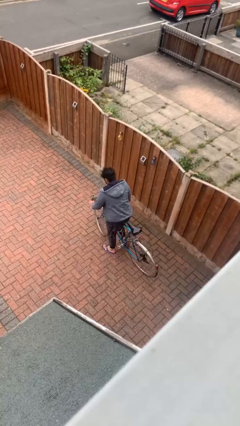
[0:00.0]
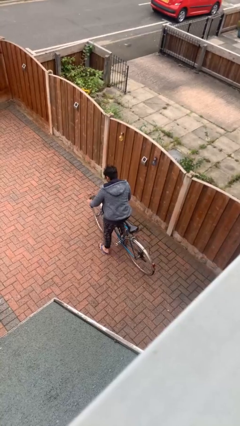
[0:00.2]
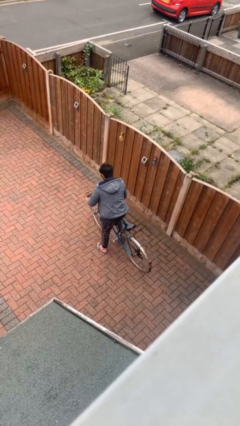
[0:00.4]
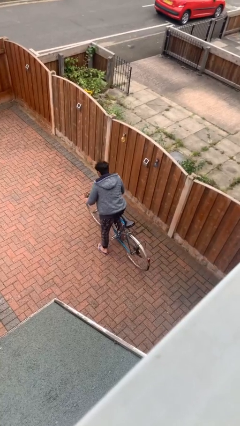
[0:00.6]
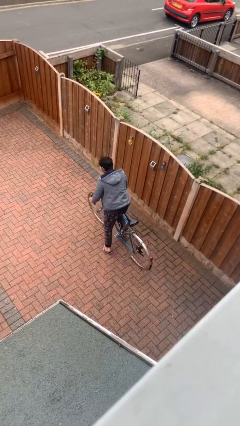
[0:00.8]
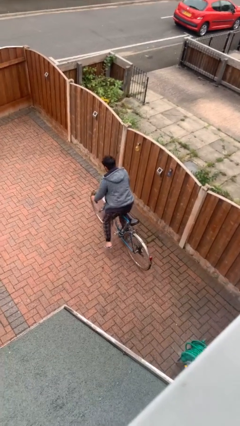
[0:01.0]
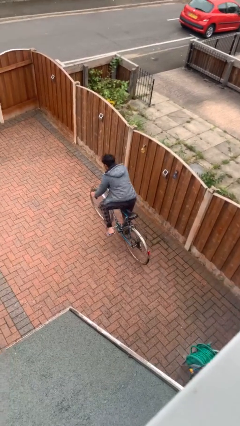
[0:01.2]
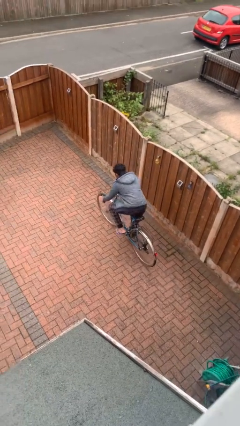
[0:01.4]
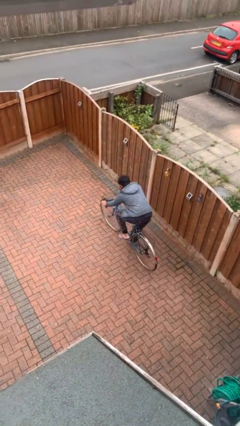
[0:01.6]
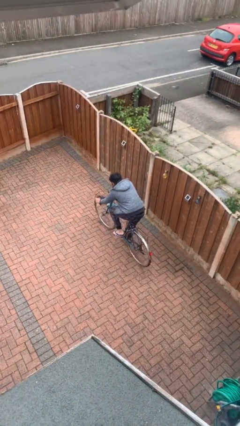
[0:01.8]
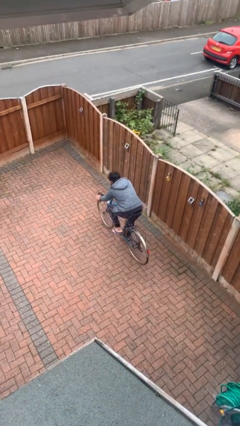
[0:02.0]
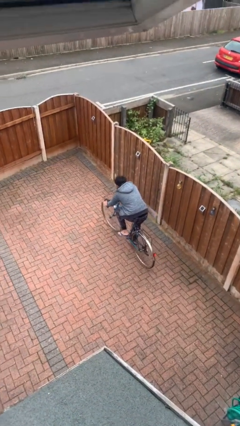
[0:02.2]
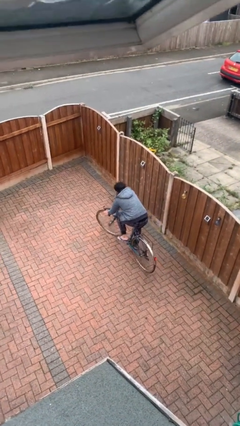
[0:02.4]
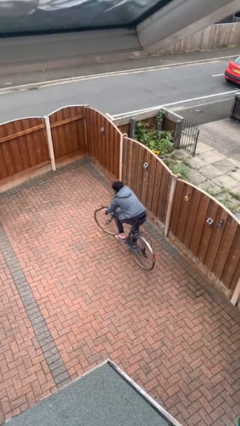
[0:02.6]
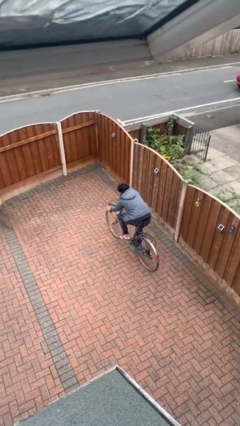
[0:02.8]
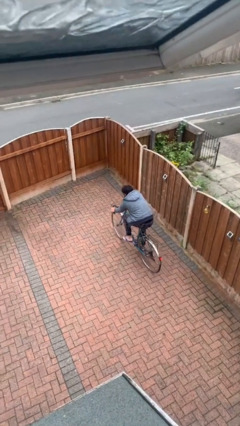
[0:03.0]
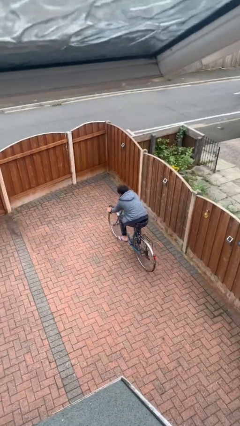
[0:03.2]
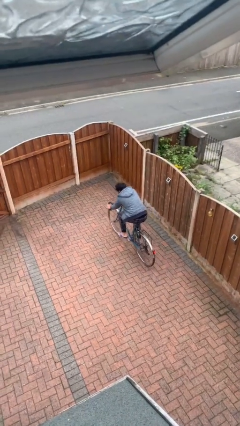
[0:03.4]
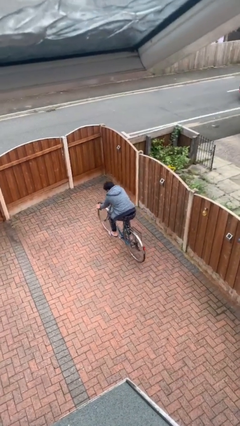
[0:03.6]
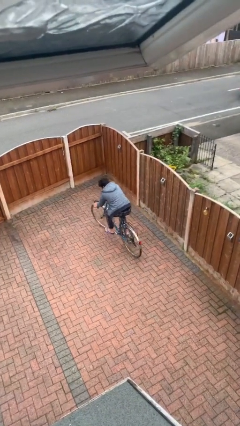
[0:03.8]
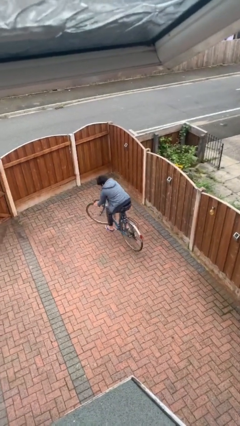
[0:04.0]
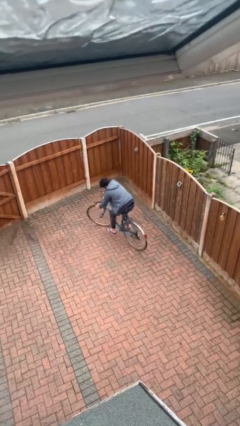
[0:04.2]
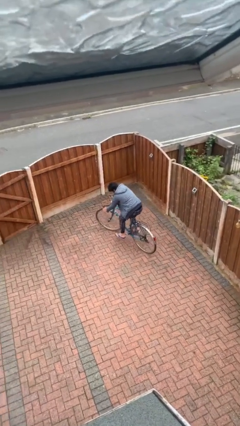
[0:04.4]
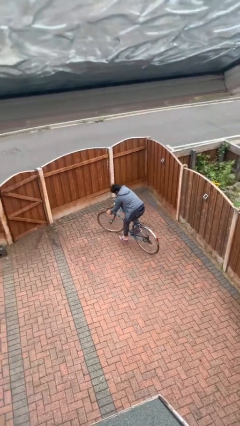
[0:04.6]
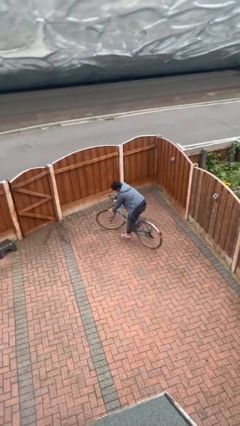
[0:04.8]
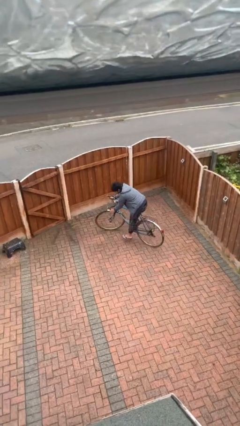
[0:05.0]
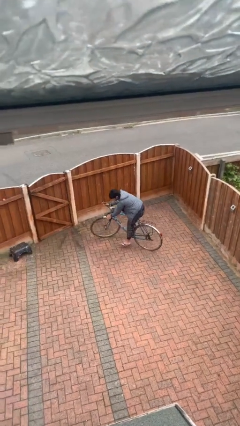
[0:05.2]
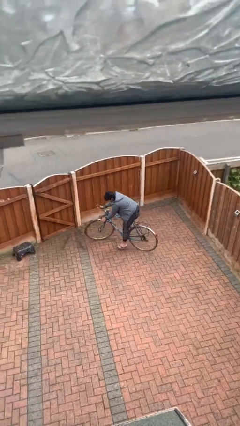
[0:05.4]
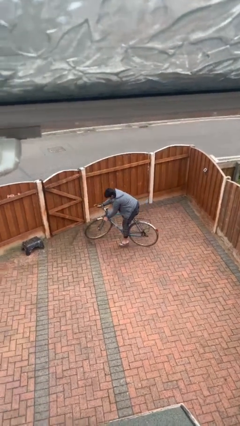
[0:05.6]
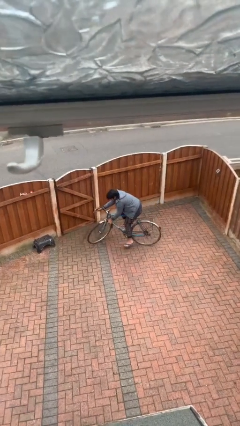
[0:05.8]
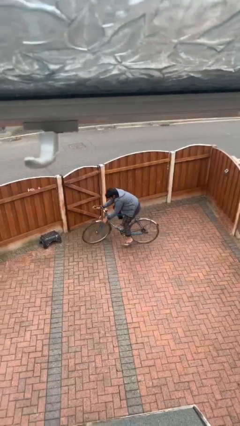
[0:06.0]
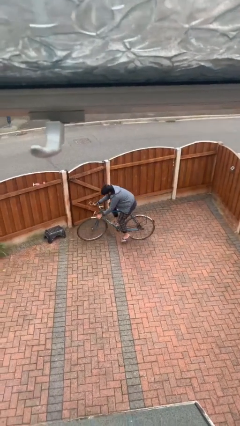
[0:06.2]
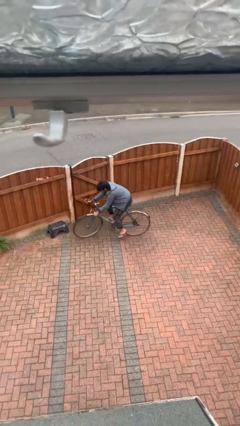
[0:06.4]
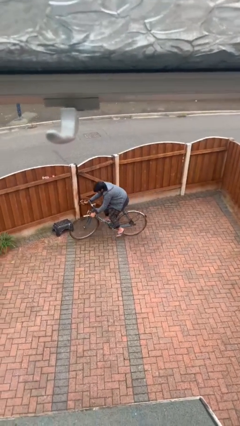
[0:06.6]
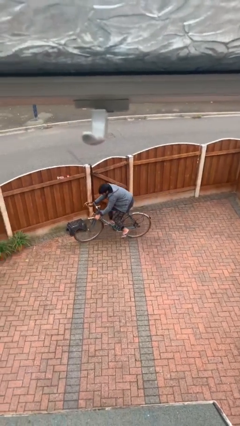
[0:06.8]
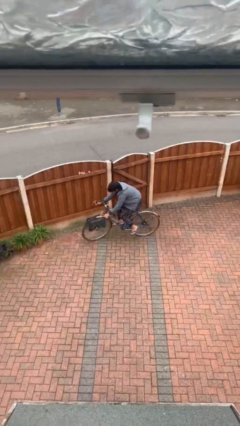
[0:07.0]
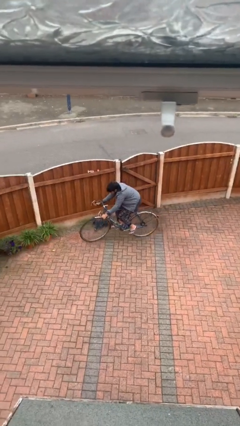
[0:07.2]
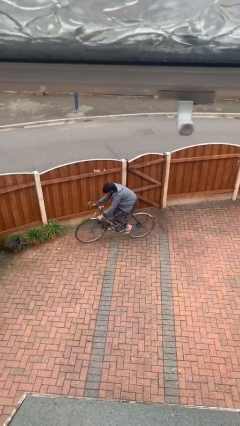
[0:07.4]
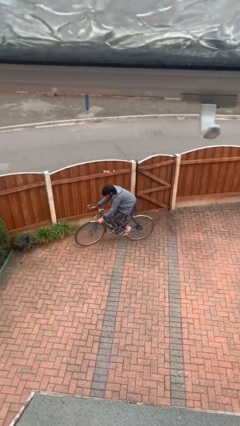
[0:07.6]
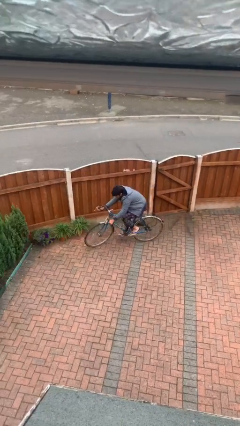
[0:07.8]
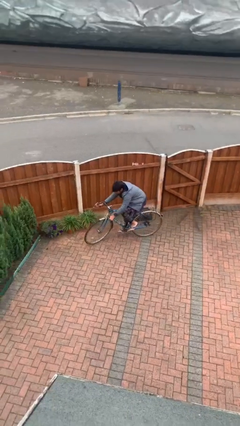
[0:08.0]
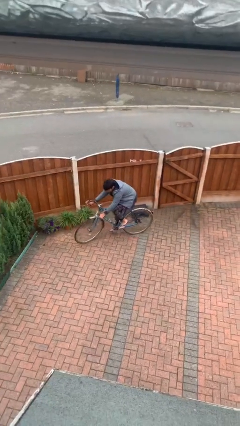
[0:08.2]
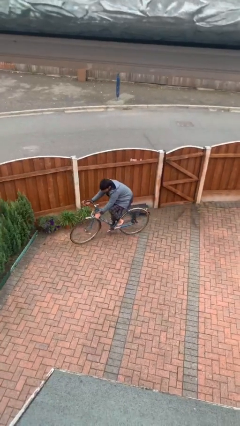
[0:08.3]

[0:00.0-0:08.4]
person rides bicycle

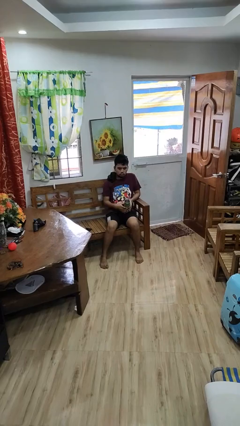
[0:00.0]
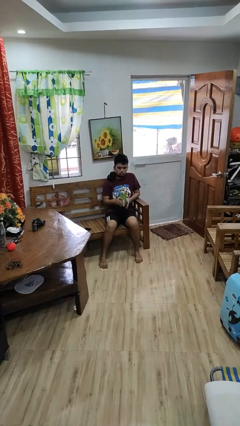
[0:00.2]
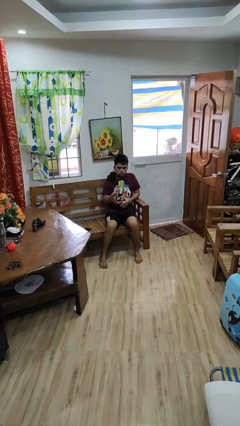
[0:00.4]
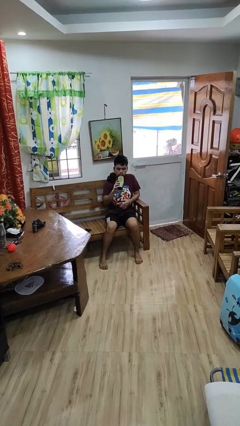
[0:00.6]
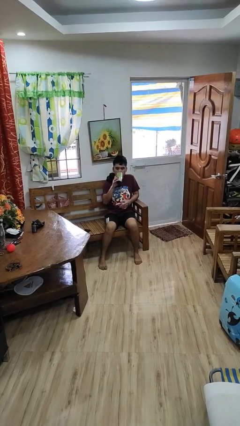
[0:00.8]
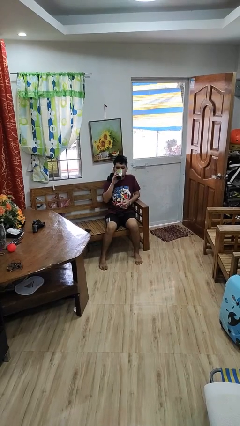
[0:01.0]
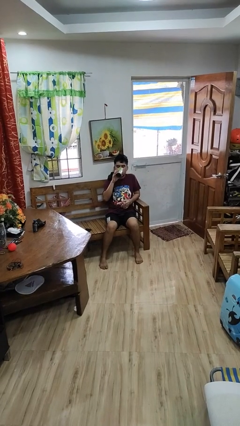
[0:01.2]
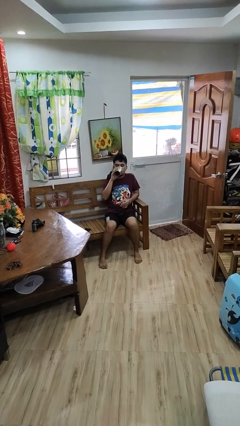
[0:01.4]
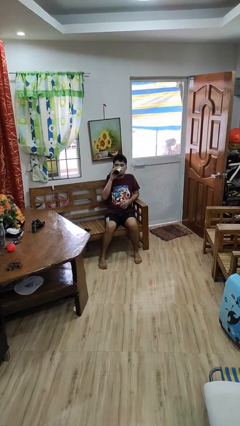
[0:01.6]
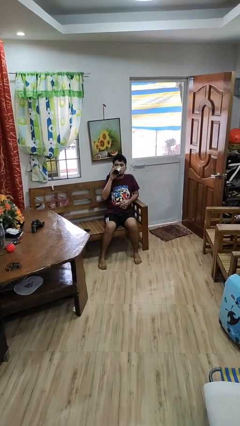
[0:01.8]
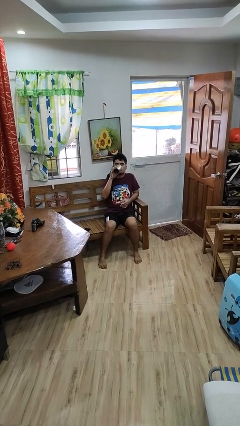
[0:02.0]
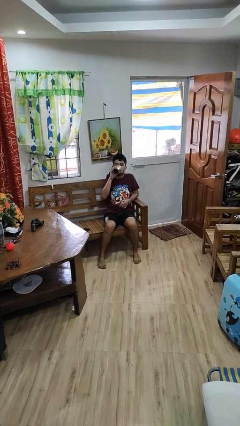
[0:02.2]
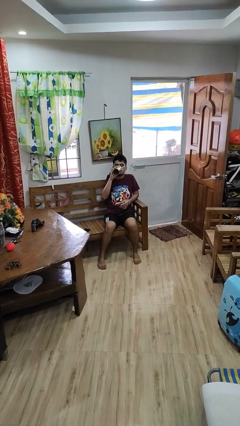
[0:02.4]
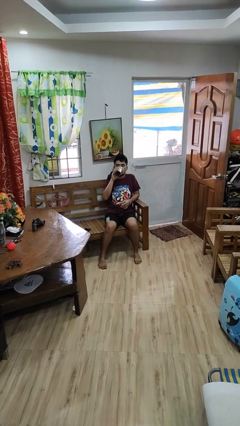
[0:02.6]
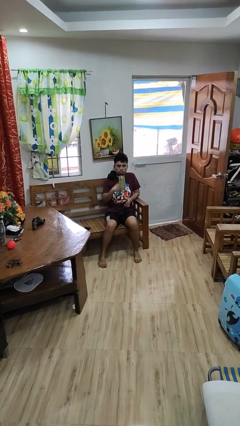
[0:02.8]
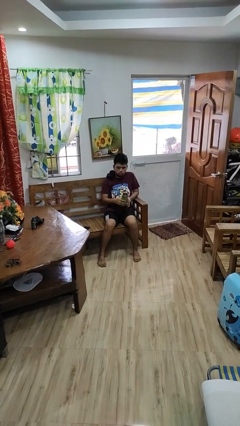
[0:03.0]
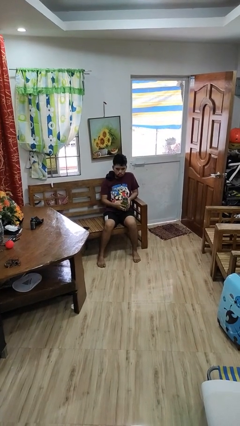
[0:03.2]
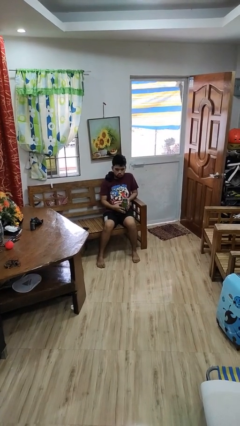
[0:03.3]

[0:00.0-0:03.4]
person drinks from bottle

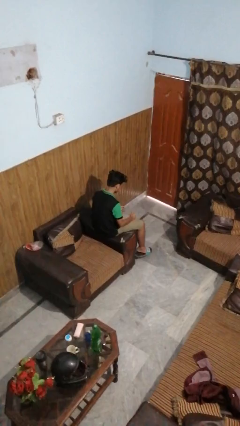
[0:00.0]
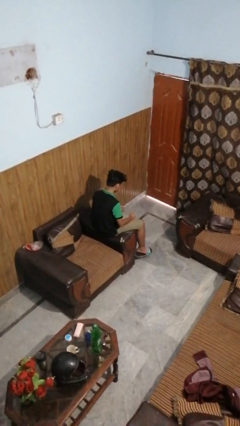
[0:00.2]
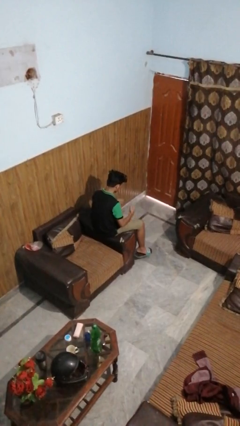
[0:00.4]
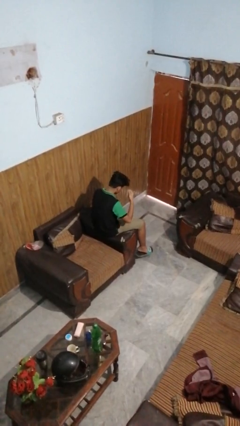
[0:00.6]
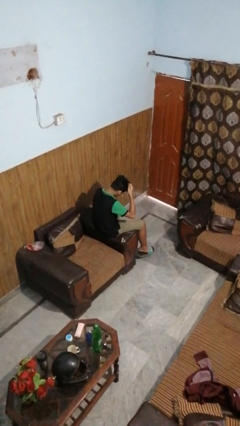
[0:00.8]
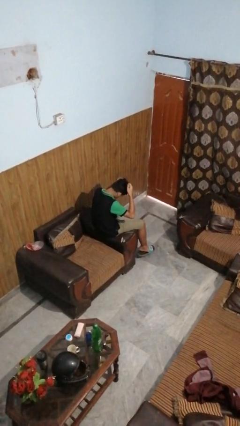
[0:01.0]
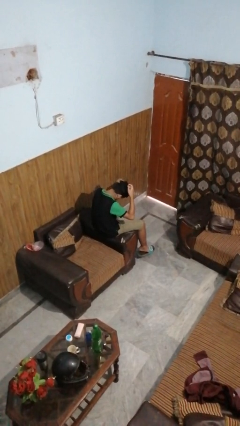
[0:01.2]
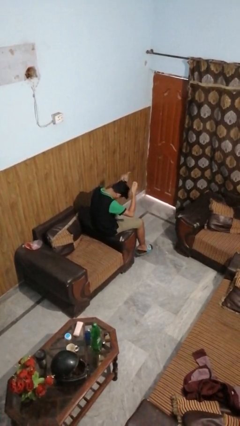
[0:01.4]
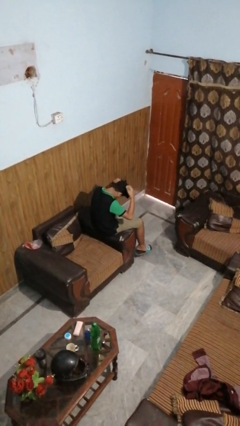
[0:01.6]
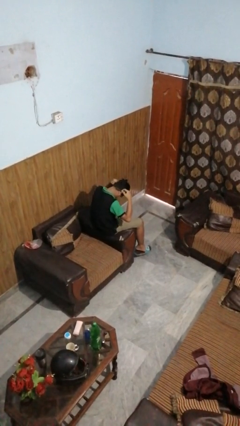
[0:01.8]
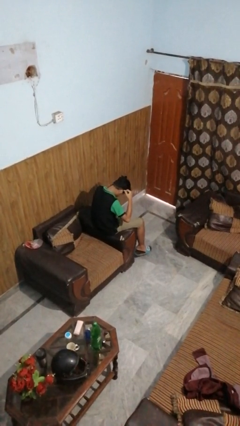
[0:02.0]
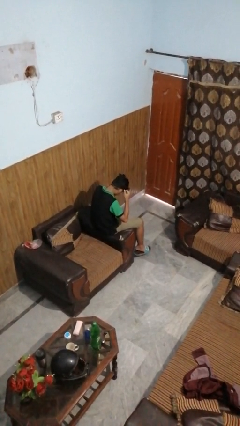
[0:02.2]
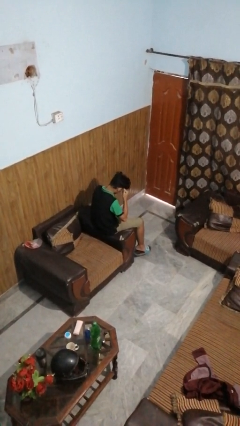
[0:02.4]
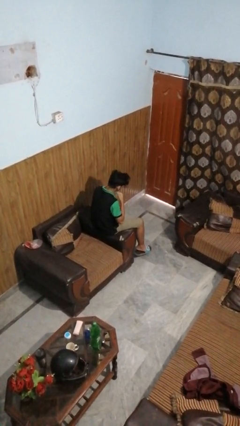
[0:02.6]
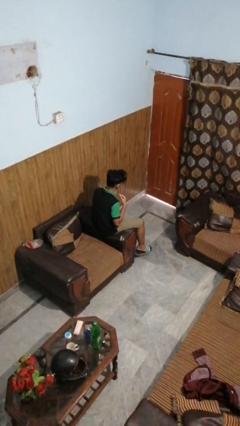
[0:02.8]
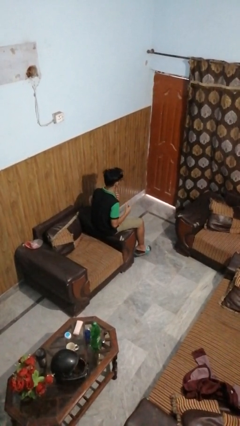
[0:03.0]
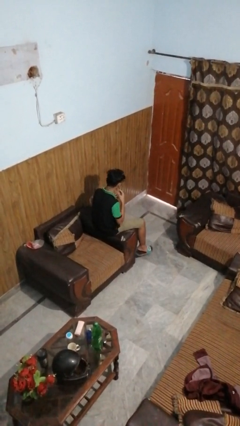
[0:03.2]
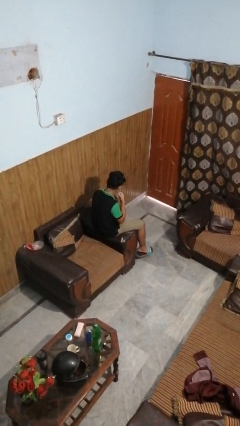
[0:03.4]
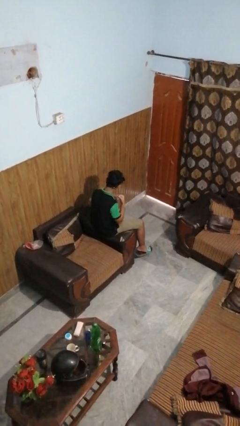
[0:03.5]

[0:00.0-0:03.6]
person puts on necklace

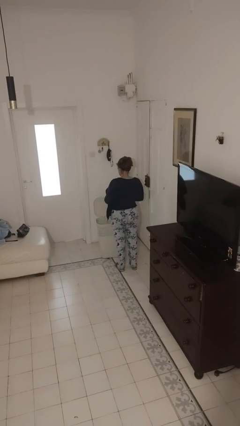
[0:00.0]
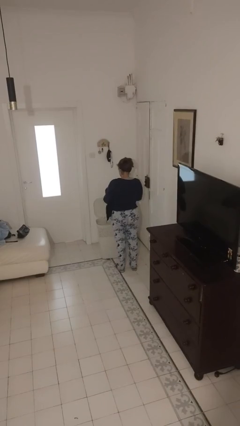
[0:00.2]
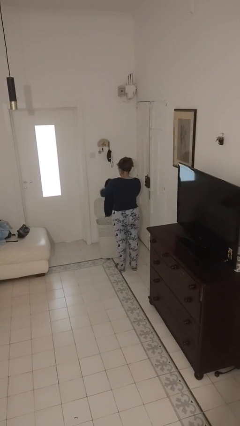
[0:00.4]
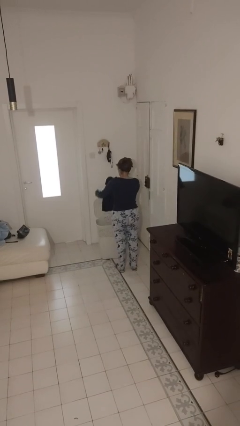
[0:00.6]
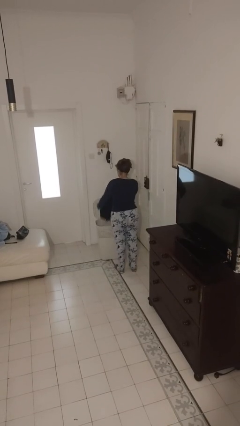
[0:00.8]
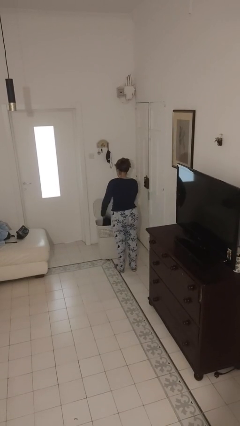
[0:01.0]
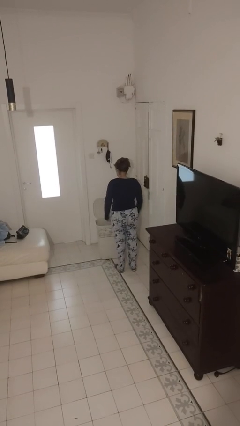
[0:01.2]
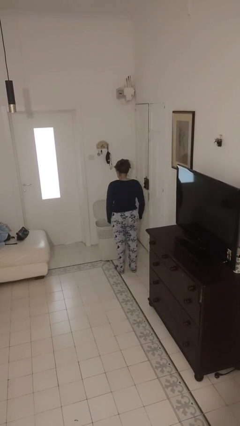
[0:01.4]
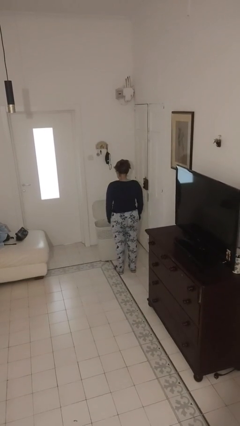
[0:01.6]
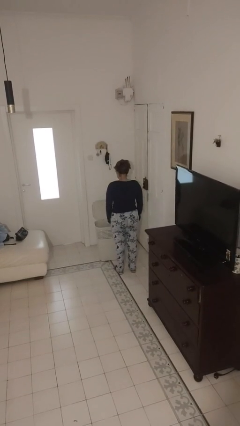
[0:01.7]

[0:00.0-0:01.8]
person puts object into basket

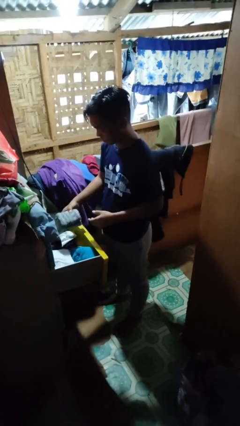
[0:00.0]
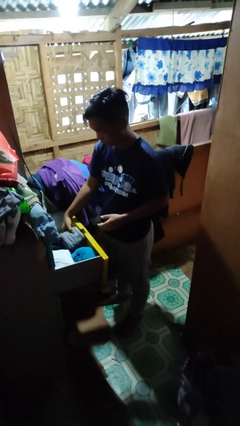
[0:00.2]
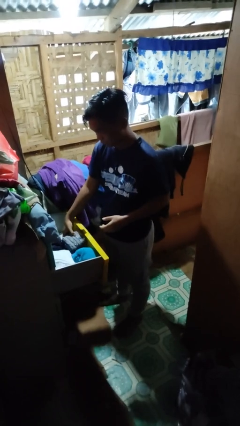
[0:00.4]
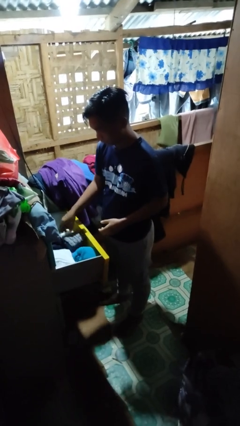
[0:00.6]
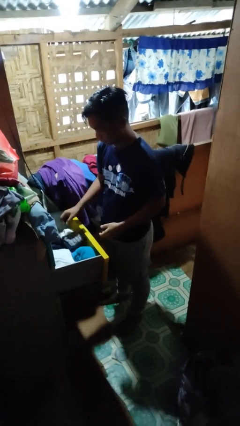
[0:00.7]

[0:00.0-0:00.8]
person puts clothes into dresser
